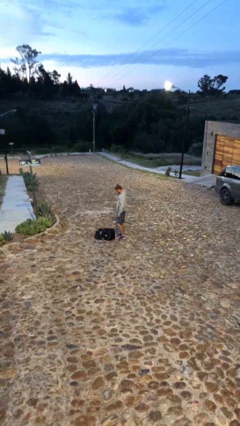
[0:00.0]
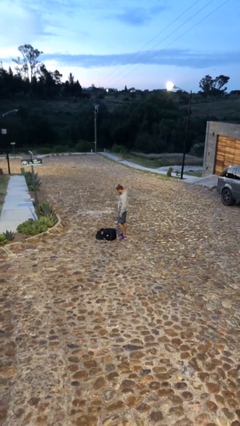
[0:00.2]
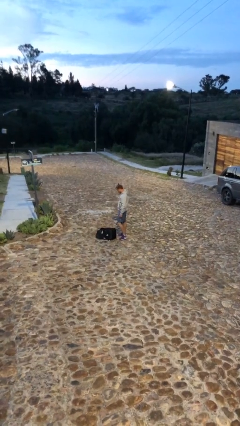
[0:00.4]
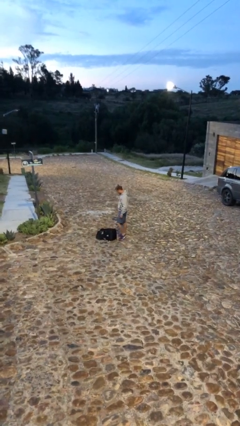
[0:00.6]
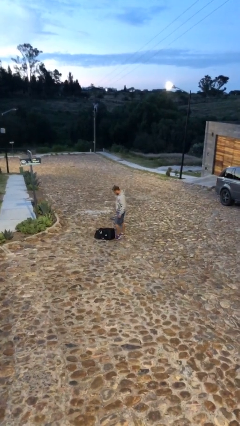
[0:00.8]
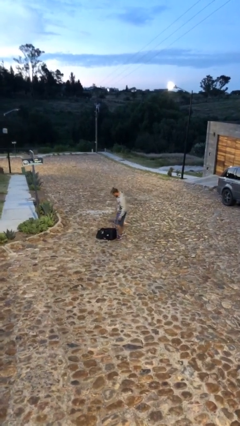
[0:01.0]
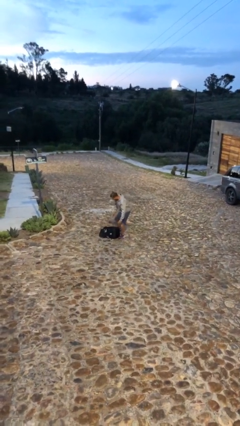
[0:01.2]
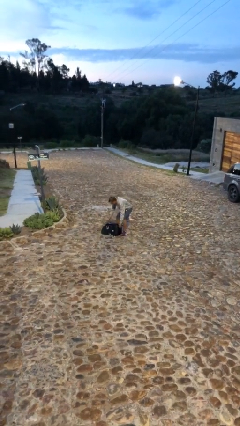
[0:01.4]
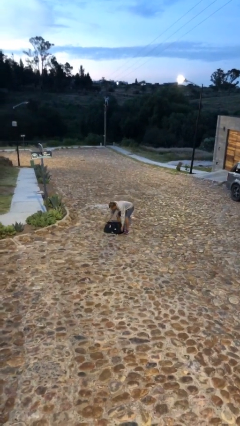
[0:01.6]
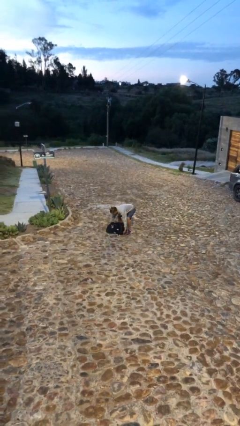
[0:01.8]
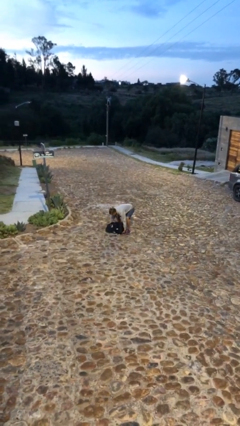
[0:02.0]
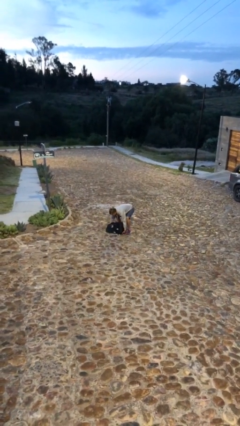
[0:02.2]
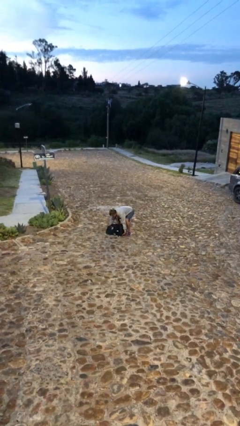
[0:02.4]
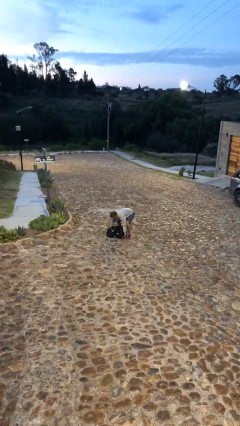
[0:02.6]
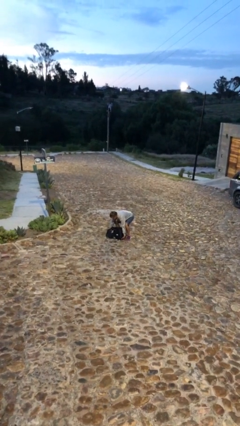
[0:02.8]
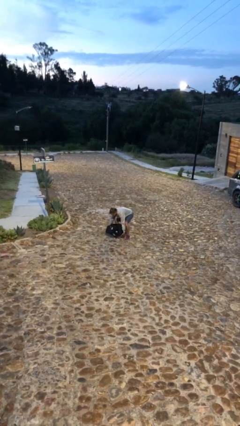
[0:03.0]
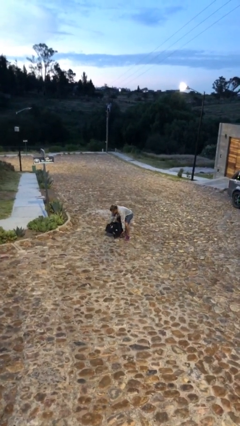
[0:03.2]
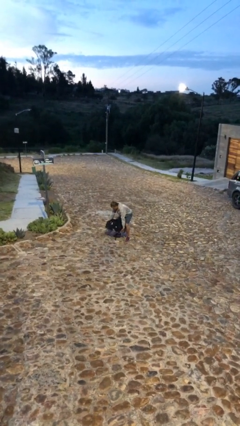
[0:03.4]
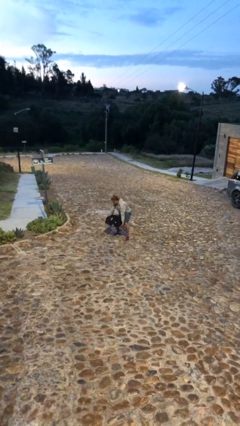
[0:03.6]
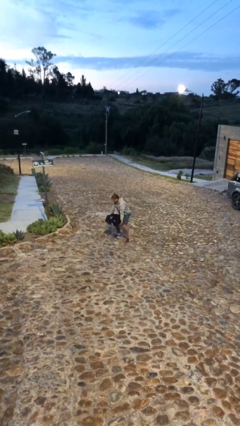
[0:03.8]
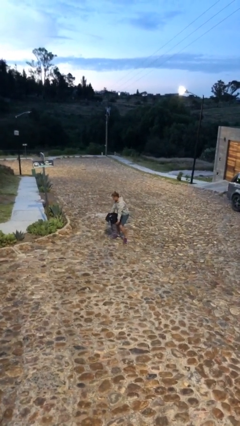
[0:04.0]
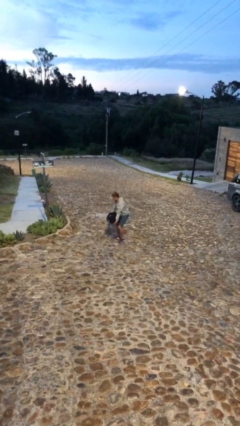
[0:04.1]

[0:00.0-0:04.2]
person picks up object from floor

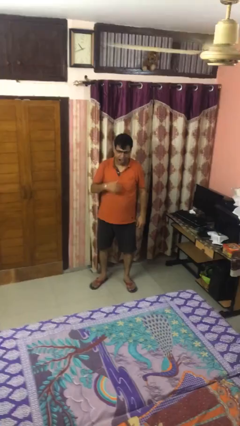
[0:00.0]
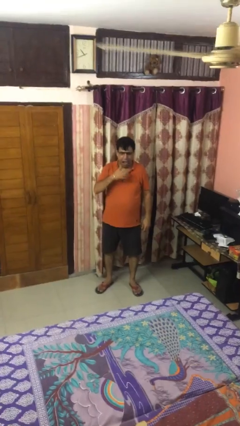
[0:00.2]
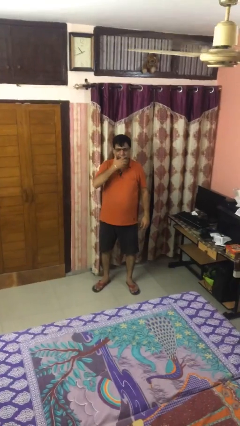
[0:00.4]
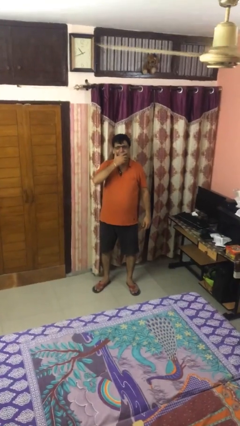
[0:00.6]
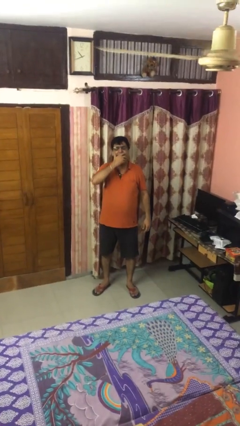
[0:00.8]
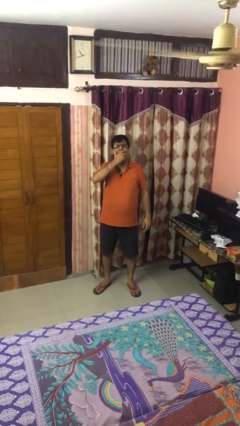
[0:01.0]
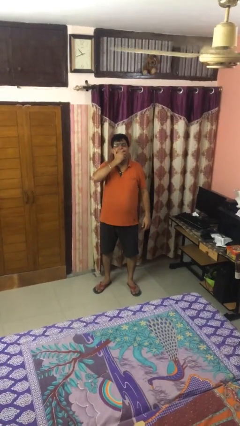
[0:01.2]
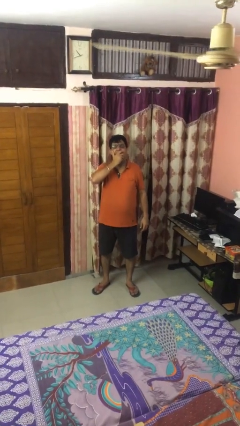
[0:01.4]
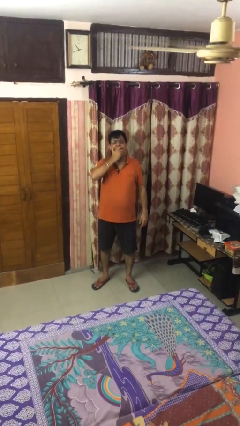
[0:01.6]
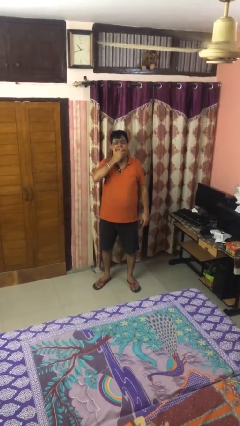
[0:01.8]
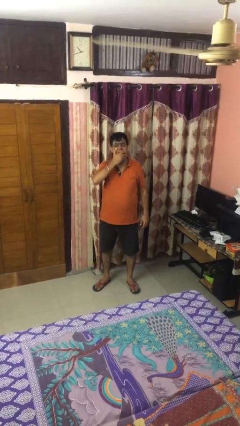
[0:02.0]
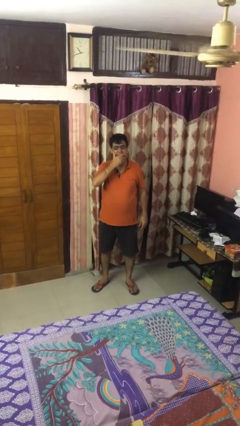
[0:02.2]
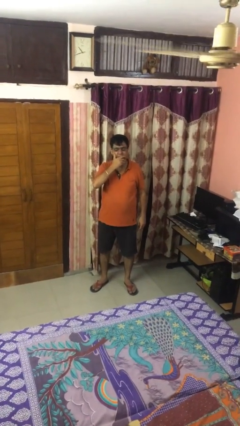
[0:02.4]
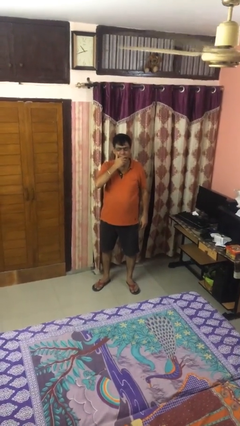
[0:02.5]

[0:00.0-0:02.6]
person yawns

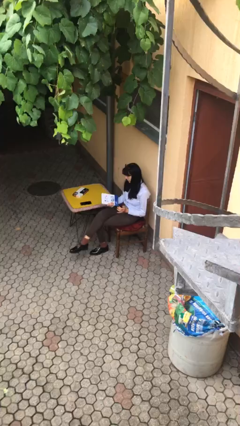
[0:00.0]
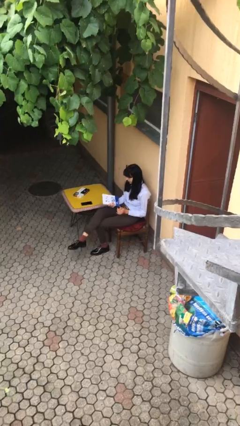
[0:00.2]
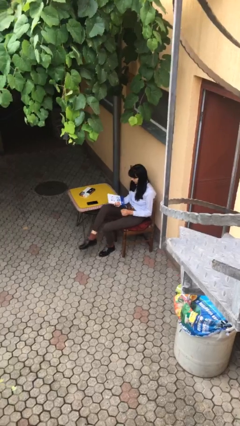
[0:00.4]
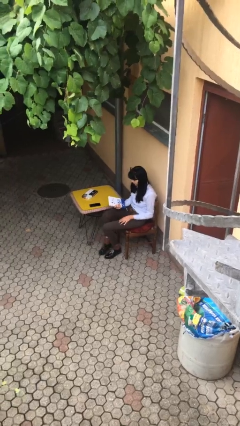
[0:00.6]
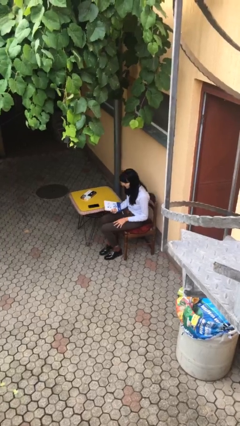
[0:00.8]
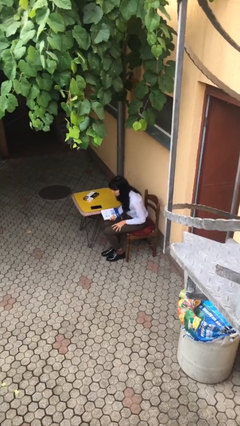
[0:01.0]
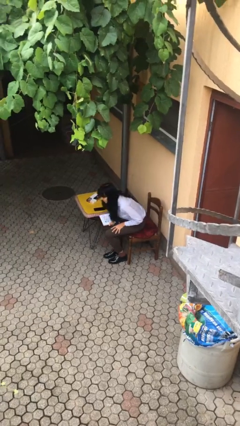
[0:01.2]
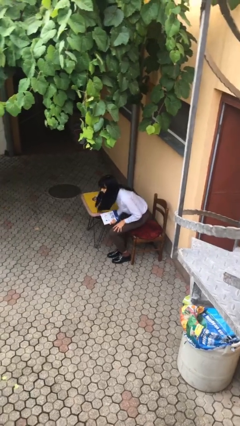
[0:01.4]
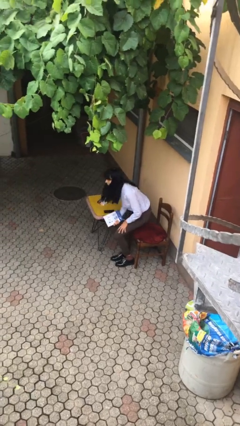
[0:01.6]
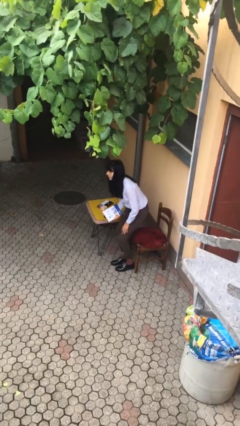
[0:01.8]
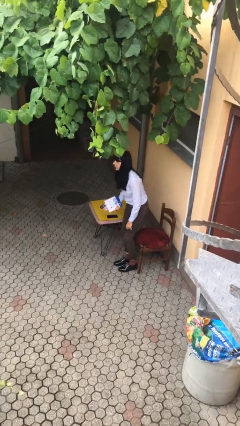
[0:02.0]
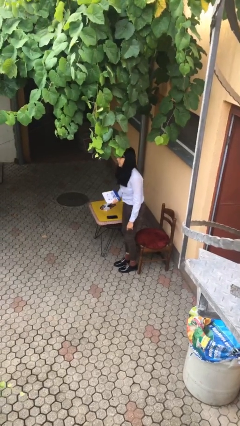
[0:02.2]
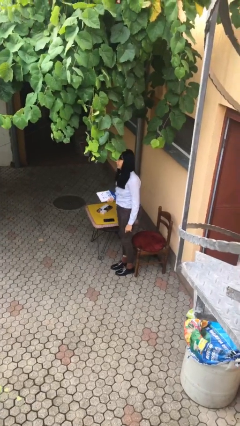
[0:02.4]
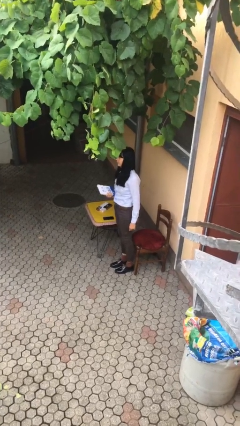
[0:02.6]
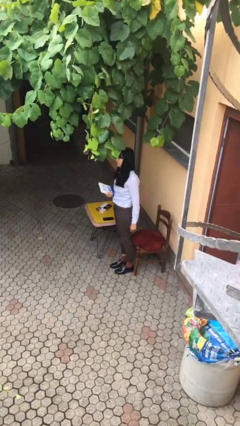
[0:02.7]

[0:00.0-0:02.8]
person stands up

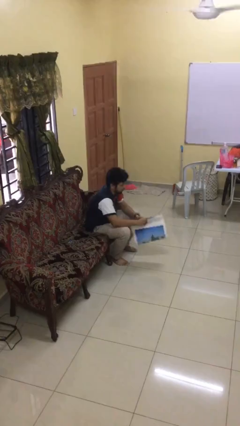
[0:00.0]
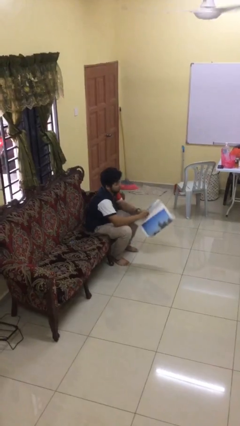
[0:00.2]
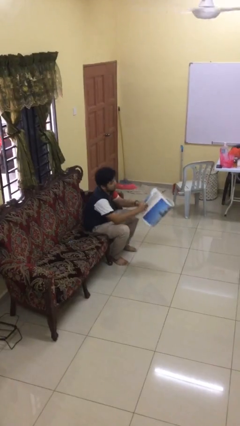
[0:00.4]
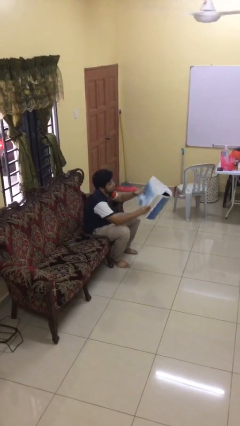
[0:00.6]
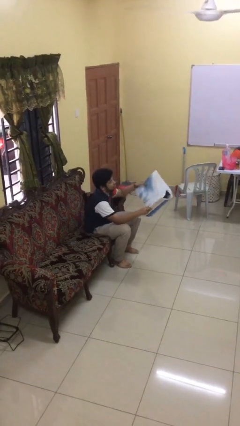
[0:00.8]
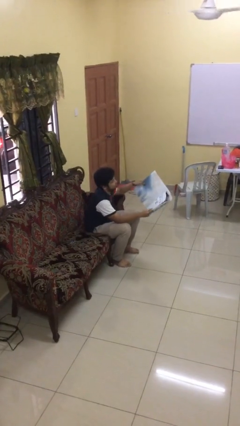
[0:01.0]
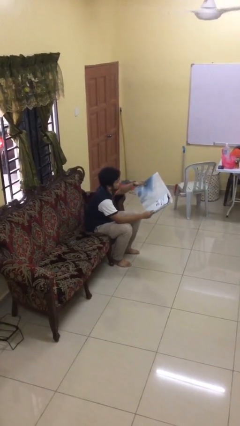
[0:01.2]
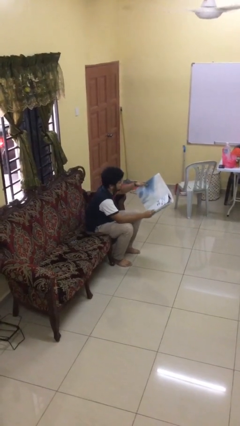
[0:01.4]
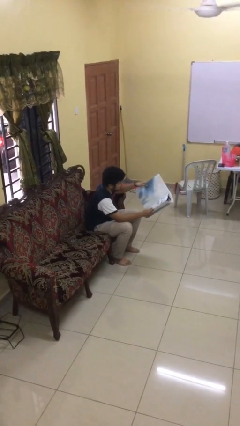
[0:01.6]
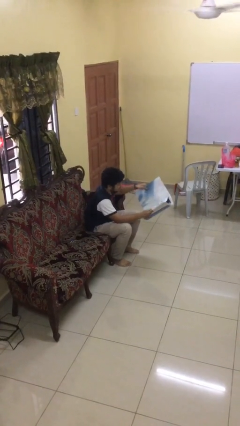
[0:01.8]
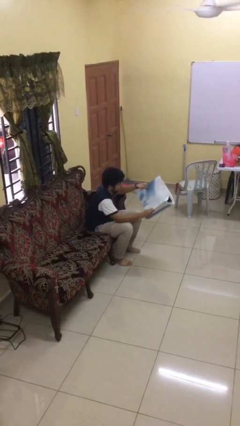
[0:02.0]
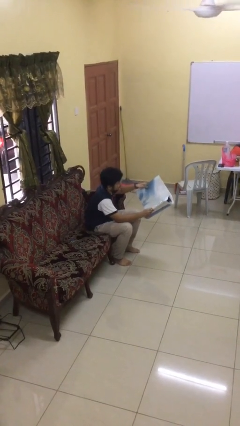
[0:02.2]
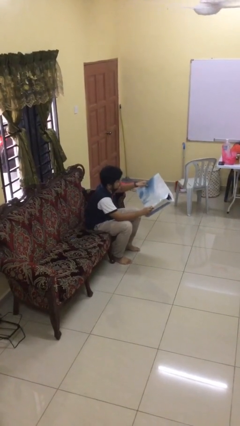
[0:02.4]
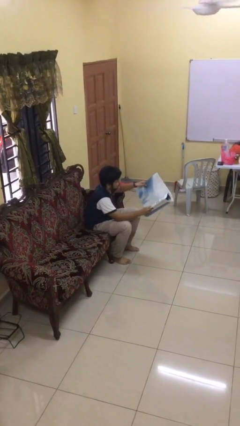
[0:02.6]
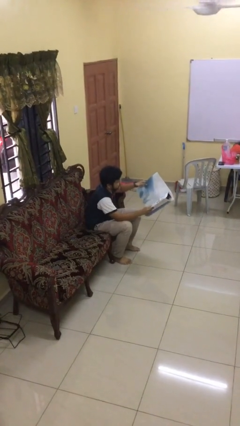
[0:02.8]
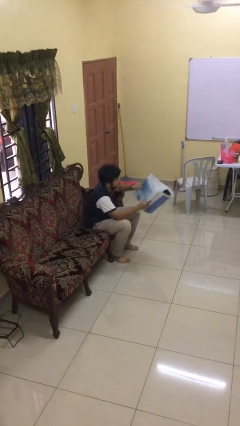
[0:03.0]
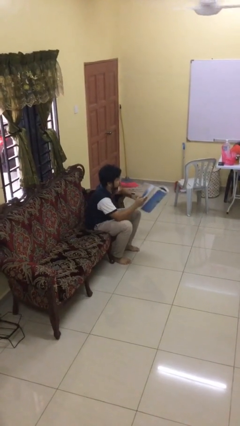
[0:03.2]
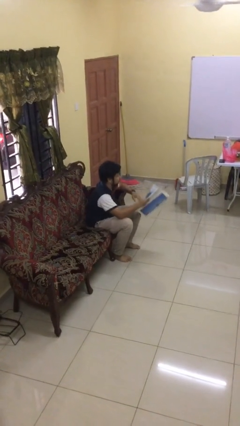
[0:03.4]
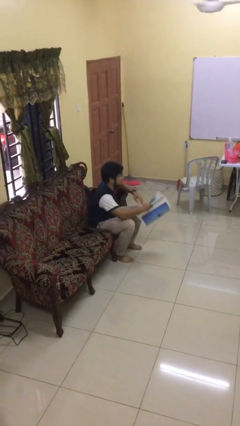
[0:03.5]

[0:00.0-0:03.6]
person reads newspaper

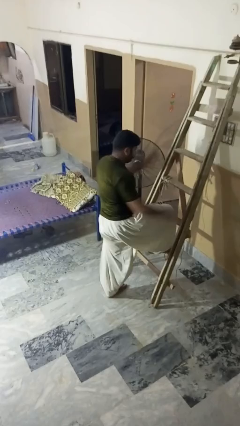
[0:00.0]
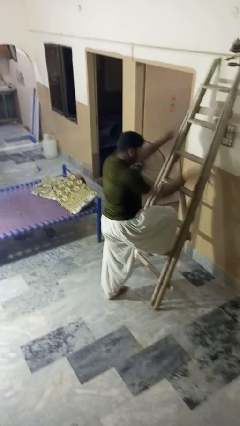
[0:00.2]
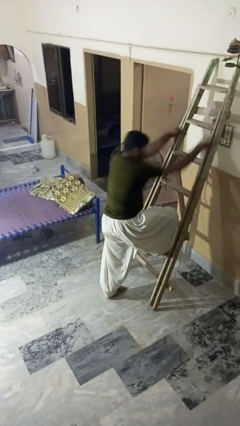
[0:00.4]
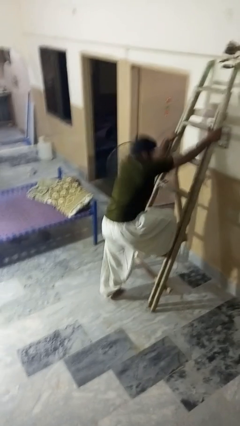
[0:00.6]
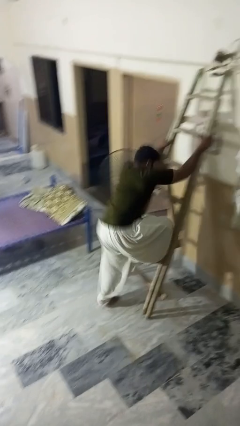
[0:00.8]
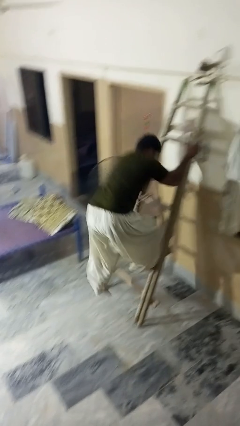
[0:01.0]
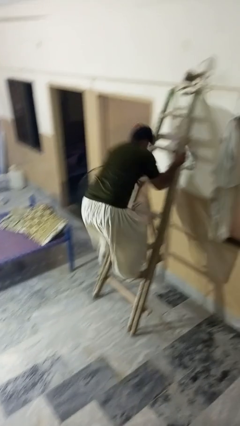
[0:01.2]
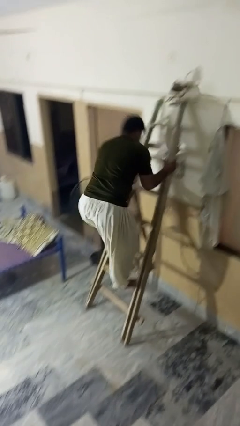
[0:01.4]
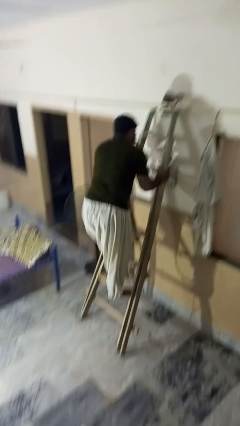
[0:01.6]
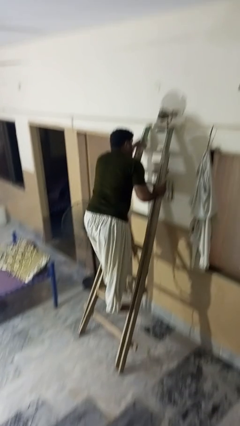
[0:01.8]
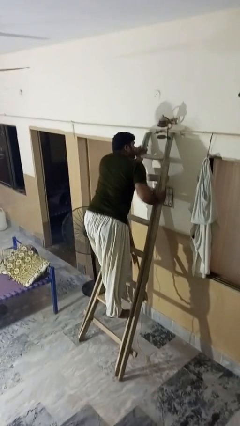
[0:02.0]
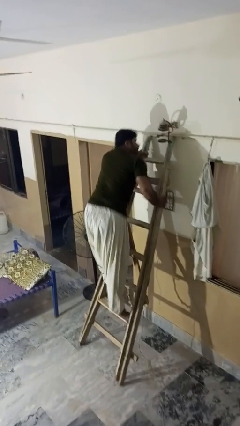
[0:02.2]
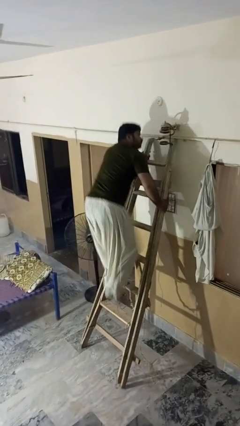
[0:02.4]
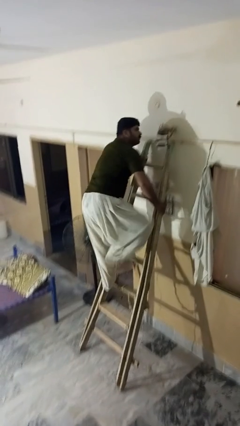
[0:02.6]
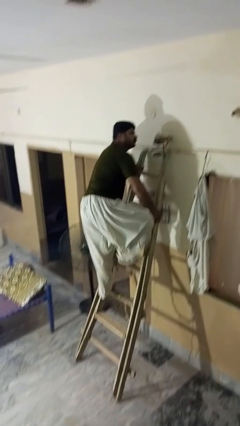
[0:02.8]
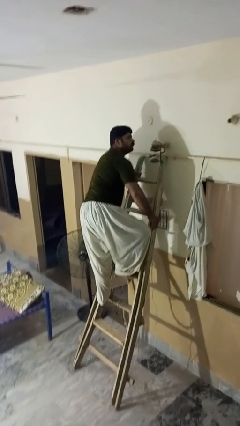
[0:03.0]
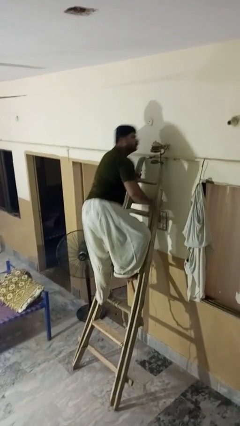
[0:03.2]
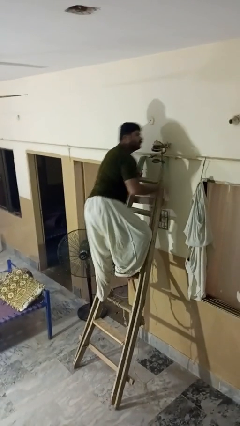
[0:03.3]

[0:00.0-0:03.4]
person climbs up ladder

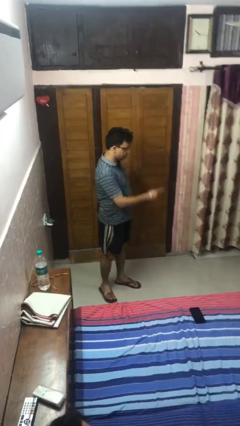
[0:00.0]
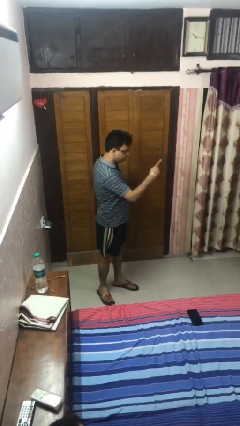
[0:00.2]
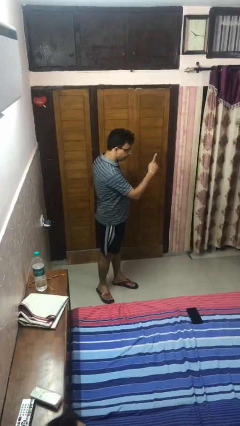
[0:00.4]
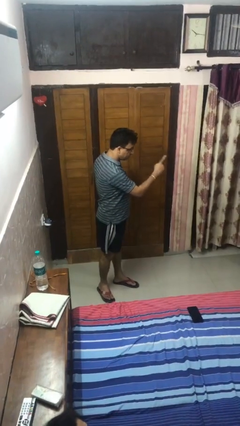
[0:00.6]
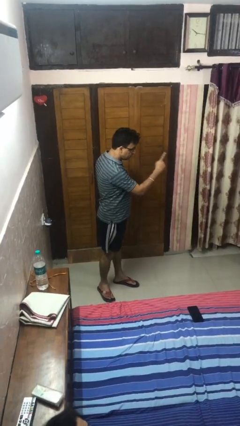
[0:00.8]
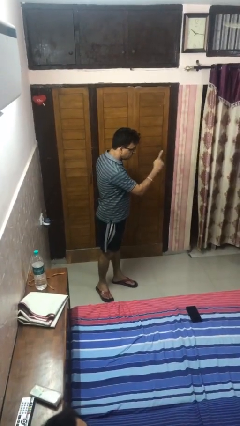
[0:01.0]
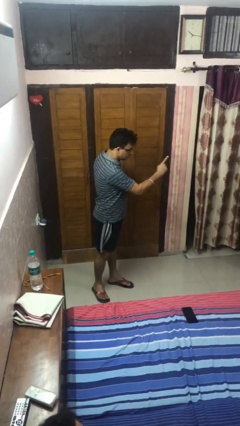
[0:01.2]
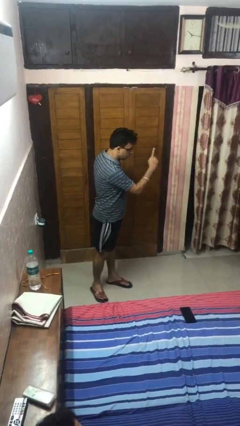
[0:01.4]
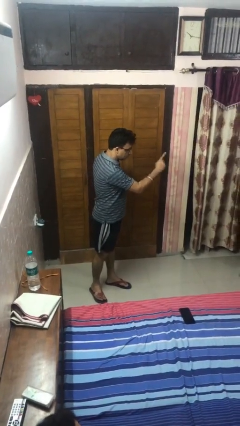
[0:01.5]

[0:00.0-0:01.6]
person points at person
